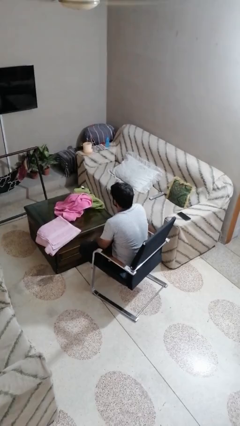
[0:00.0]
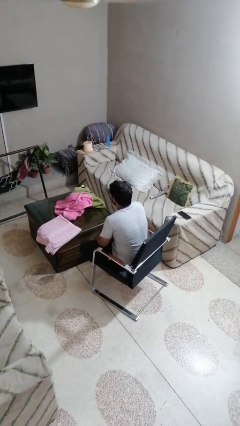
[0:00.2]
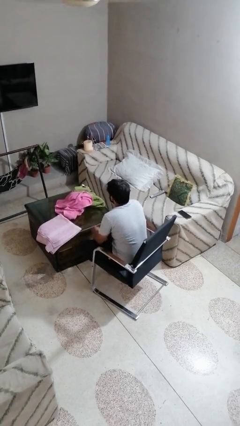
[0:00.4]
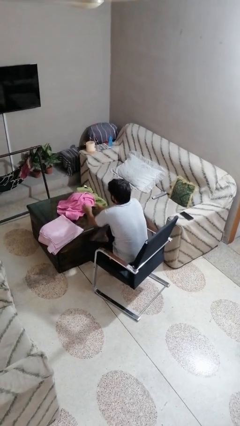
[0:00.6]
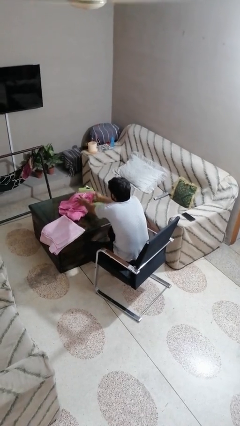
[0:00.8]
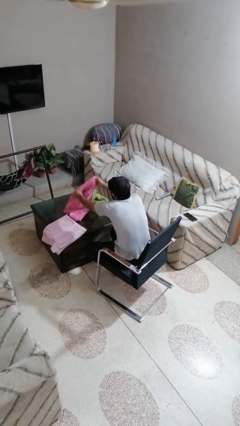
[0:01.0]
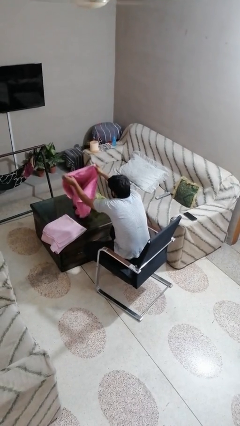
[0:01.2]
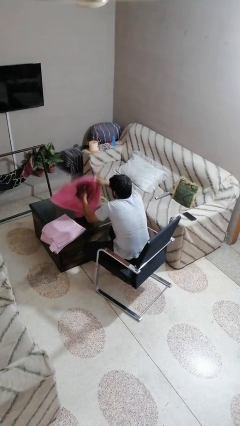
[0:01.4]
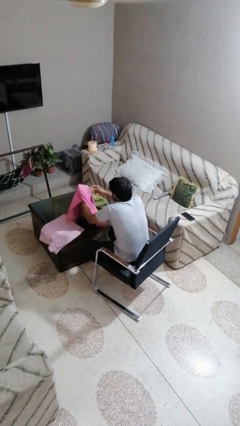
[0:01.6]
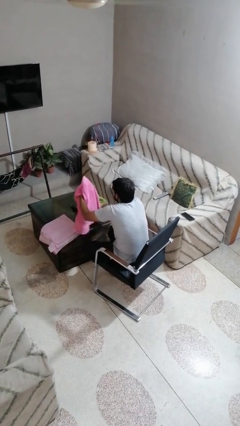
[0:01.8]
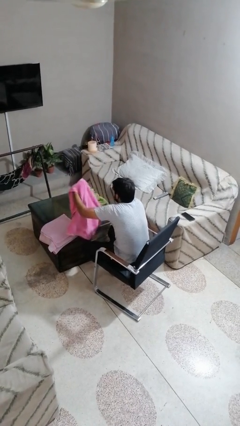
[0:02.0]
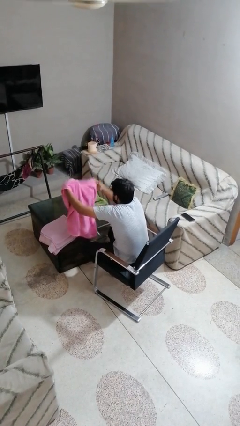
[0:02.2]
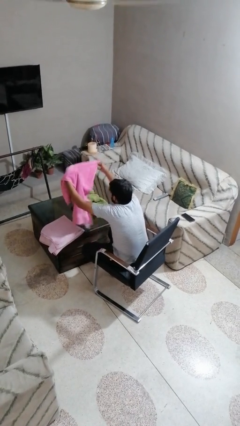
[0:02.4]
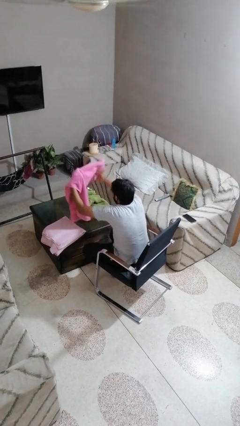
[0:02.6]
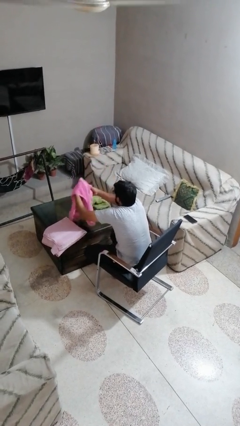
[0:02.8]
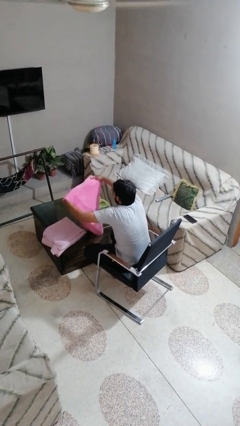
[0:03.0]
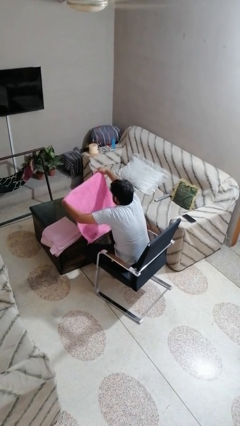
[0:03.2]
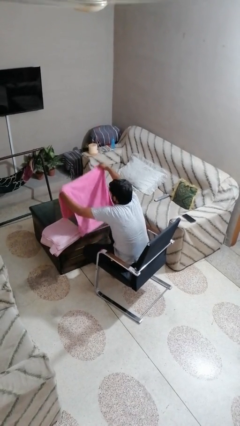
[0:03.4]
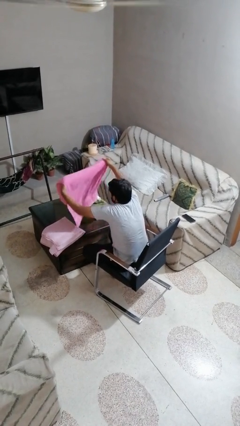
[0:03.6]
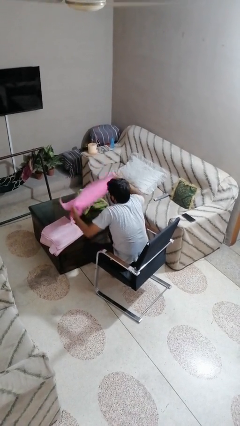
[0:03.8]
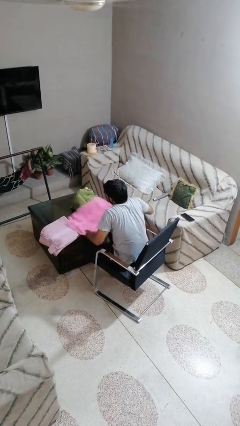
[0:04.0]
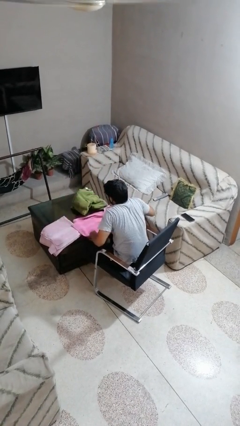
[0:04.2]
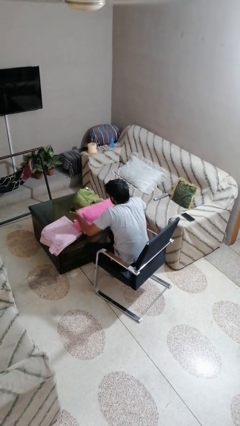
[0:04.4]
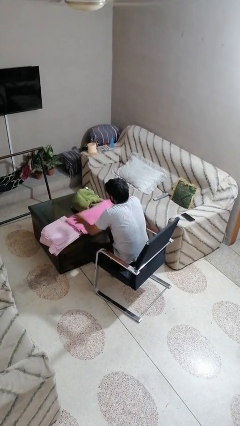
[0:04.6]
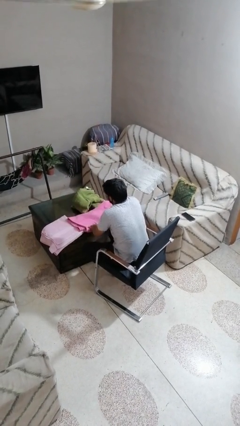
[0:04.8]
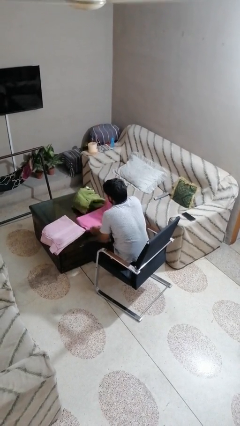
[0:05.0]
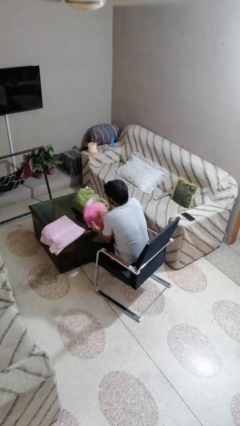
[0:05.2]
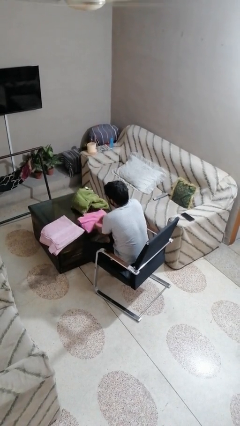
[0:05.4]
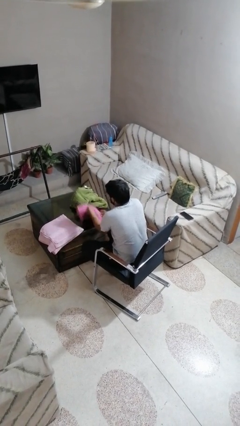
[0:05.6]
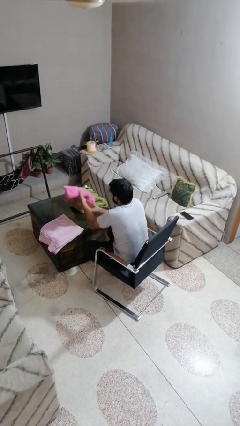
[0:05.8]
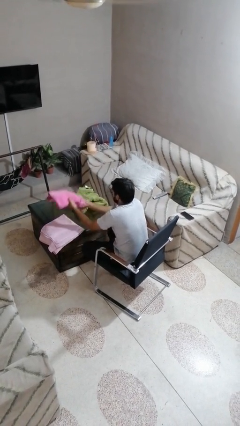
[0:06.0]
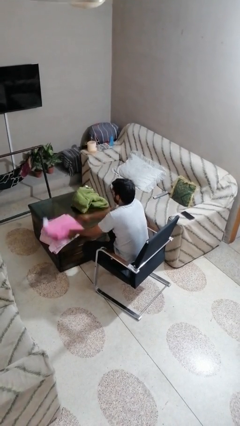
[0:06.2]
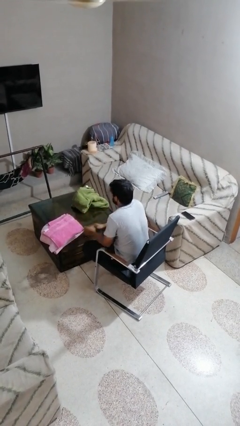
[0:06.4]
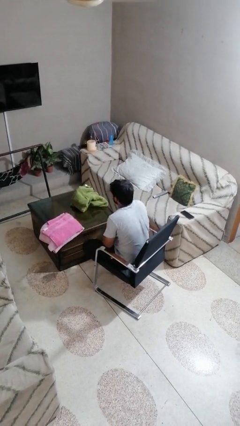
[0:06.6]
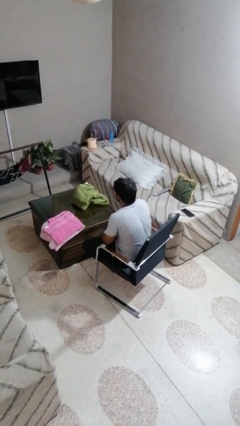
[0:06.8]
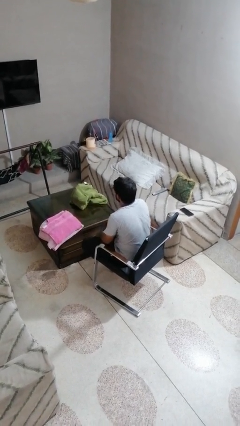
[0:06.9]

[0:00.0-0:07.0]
person folds towel

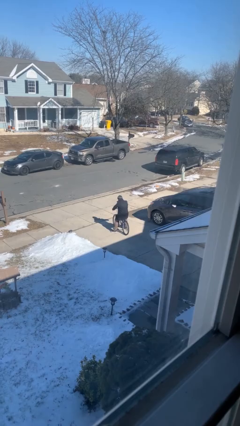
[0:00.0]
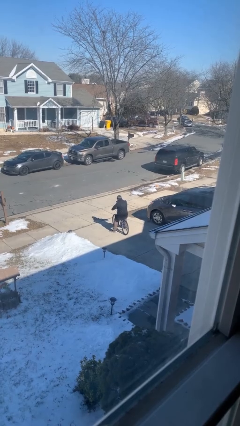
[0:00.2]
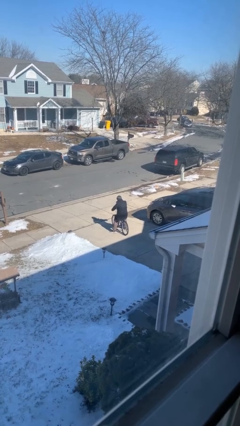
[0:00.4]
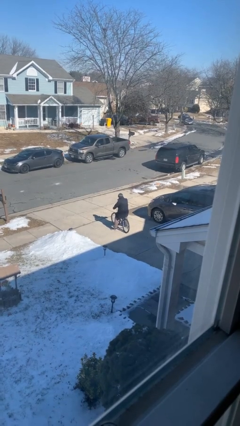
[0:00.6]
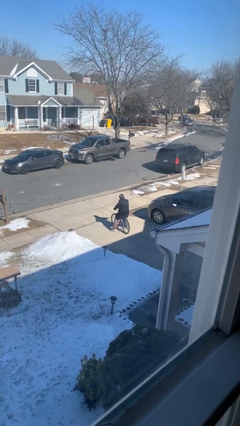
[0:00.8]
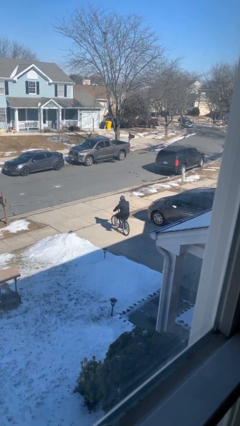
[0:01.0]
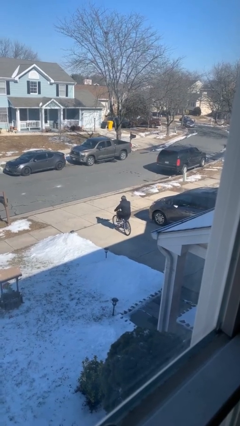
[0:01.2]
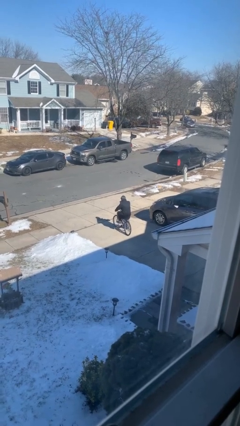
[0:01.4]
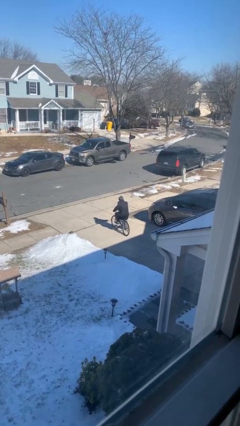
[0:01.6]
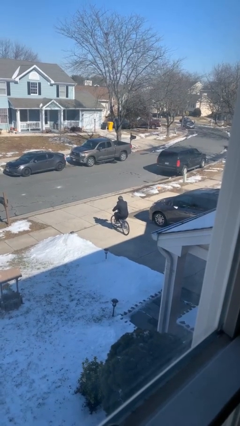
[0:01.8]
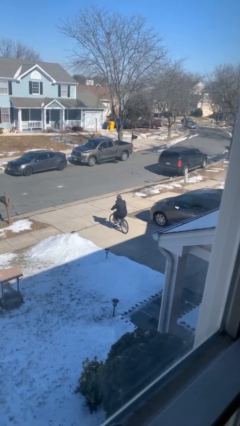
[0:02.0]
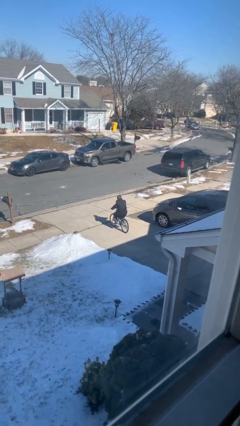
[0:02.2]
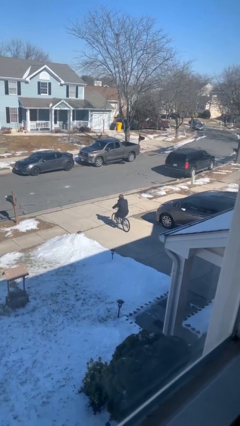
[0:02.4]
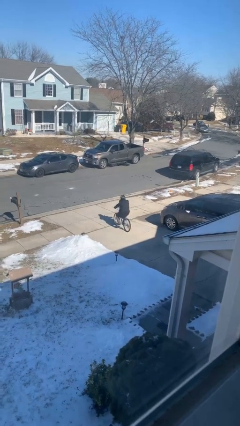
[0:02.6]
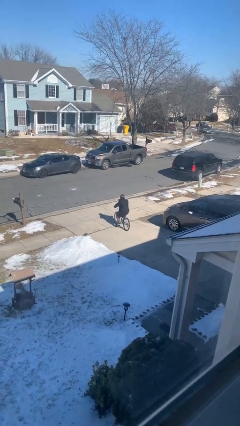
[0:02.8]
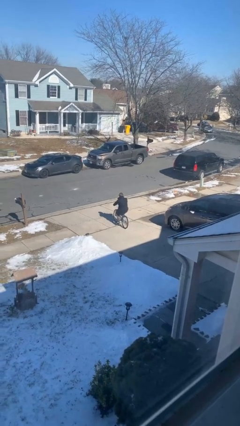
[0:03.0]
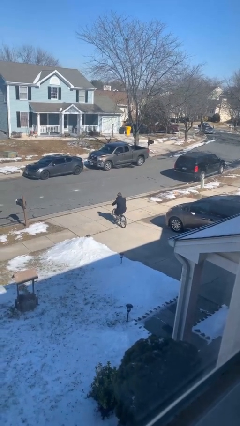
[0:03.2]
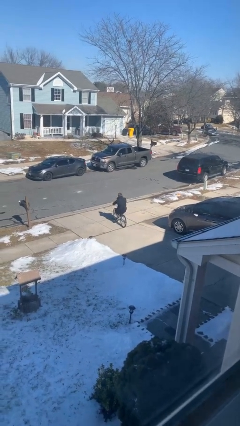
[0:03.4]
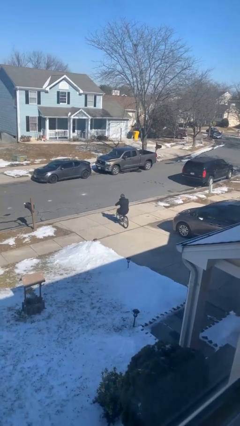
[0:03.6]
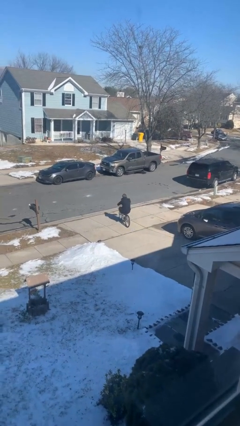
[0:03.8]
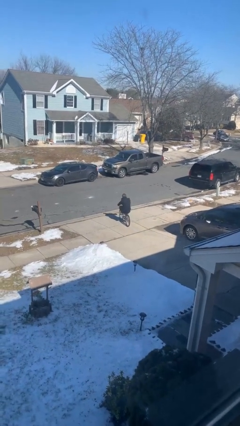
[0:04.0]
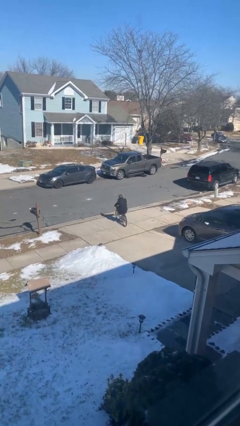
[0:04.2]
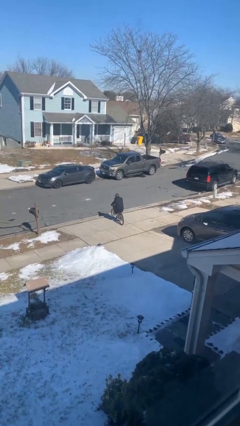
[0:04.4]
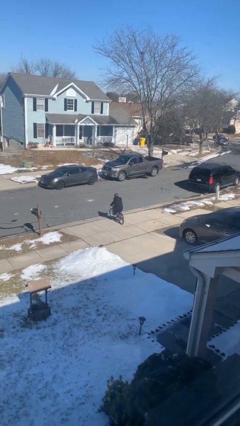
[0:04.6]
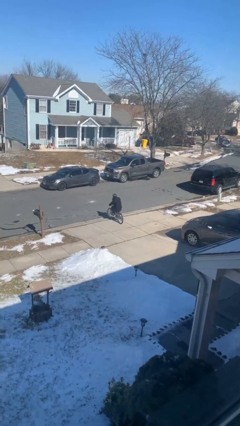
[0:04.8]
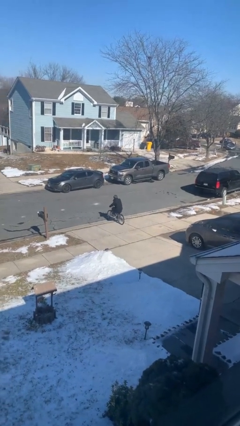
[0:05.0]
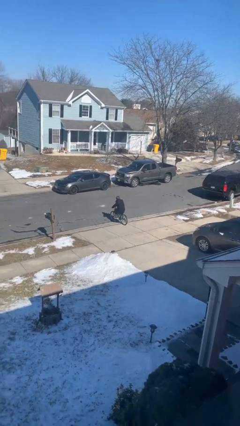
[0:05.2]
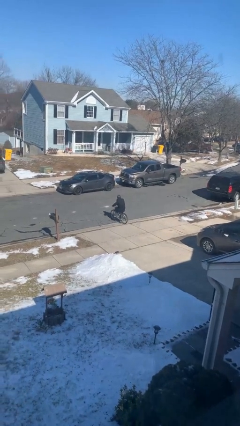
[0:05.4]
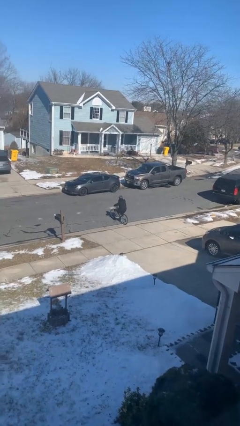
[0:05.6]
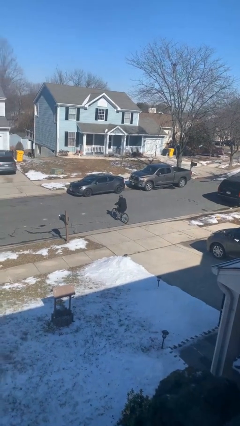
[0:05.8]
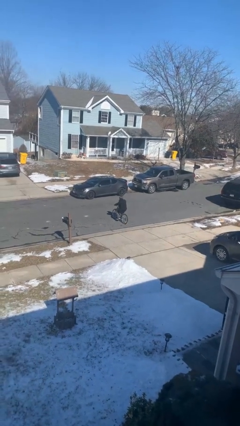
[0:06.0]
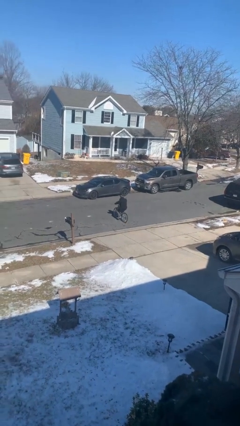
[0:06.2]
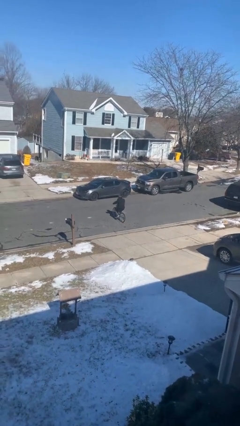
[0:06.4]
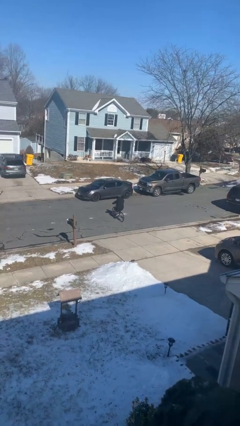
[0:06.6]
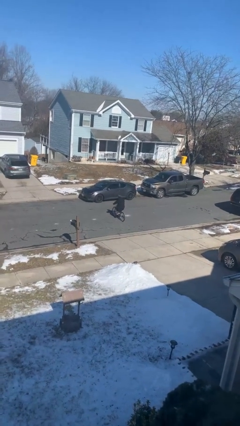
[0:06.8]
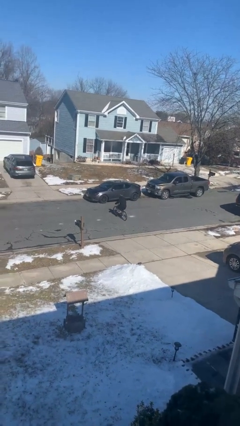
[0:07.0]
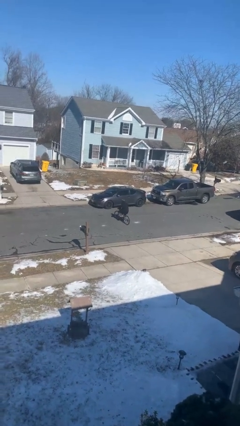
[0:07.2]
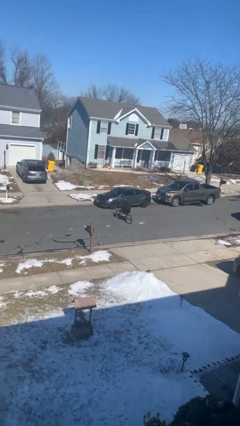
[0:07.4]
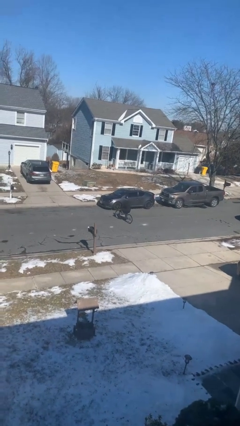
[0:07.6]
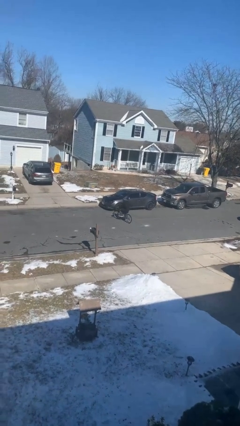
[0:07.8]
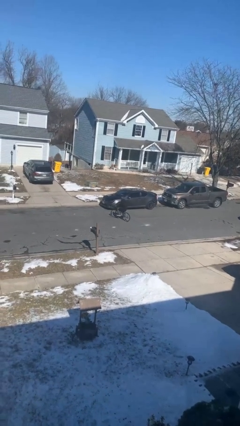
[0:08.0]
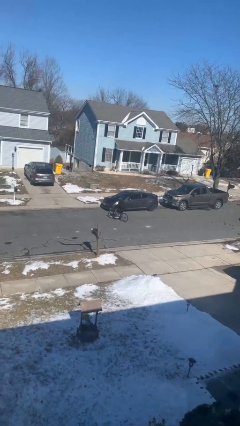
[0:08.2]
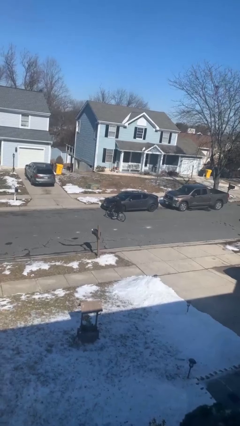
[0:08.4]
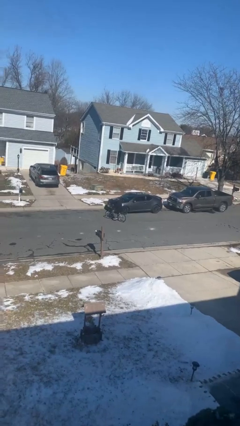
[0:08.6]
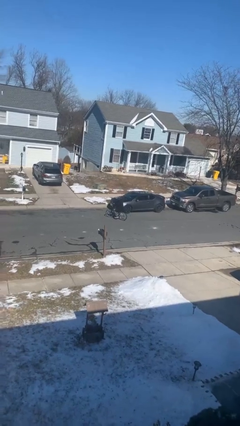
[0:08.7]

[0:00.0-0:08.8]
person rides bicycle

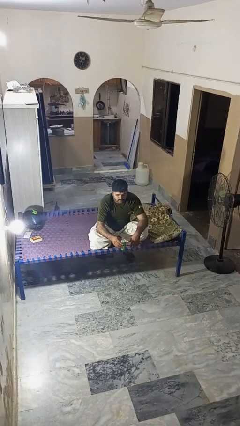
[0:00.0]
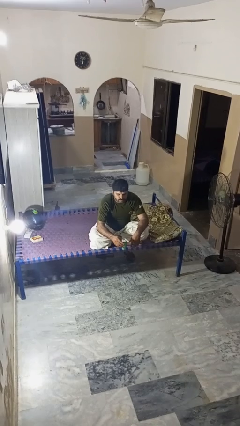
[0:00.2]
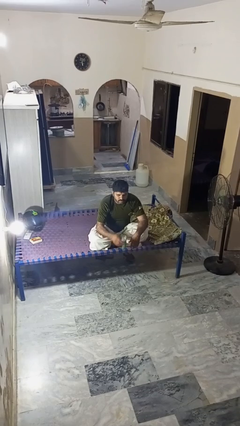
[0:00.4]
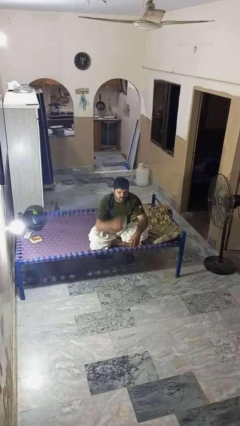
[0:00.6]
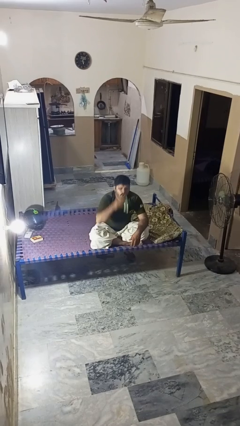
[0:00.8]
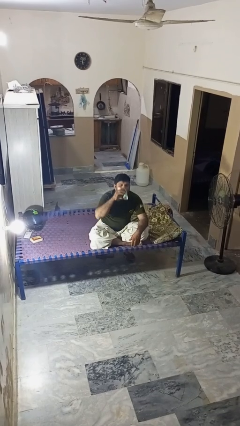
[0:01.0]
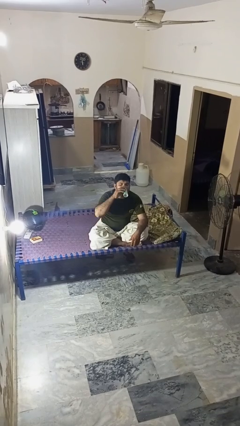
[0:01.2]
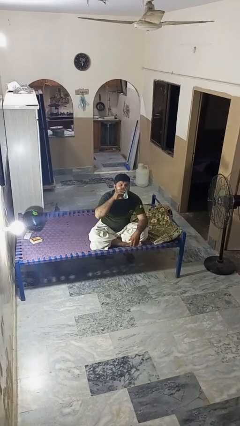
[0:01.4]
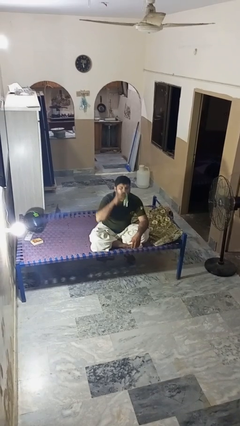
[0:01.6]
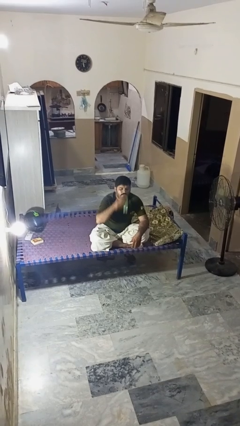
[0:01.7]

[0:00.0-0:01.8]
person drinks from beverage can

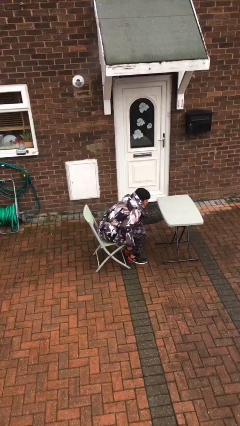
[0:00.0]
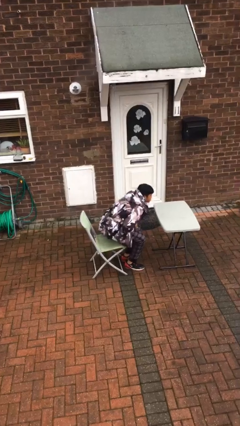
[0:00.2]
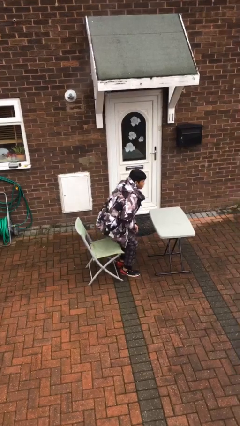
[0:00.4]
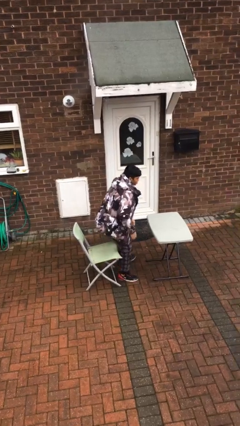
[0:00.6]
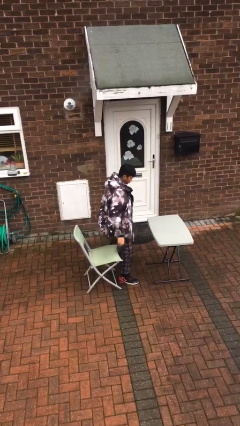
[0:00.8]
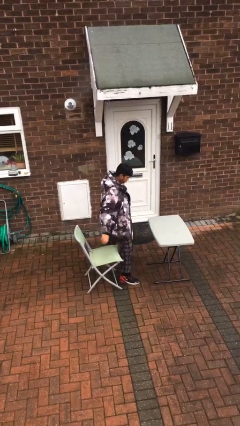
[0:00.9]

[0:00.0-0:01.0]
person stands up
